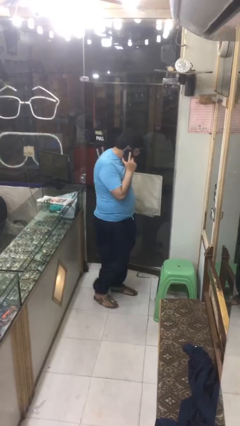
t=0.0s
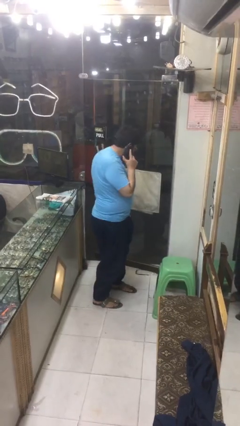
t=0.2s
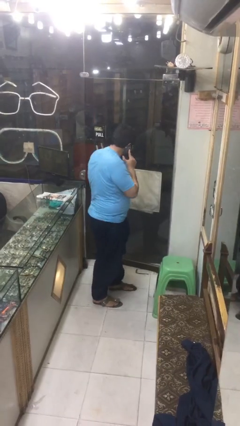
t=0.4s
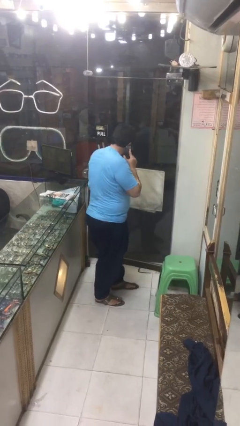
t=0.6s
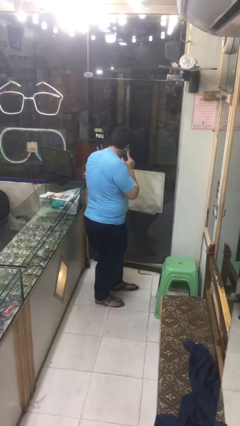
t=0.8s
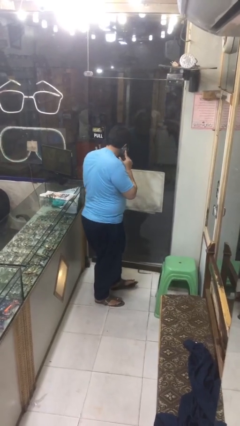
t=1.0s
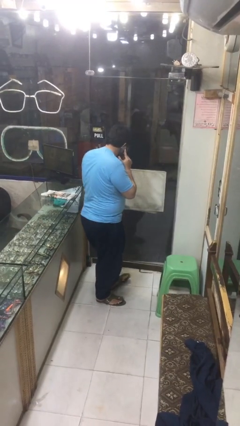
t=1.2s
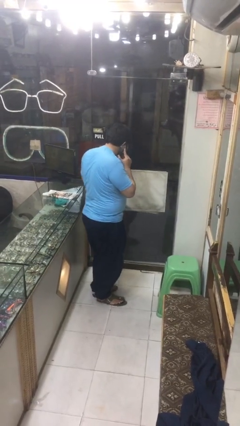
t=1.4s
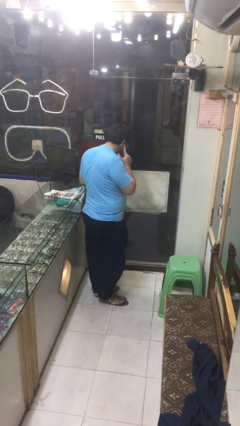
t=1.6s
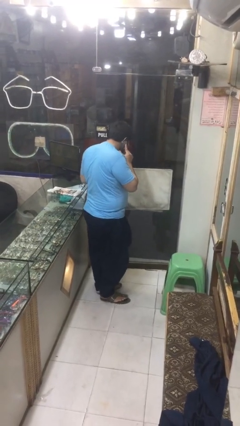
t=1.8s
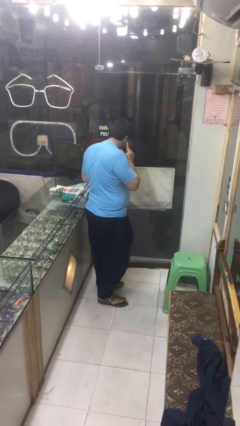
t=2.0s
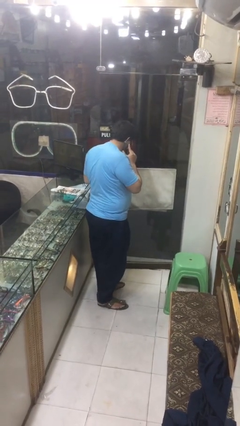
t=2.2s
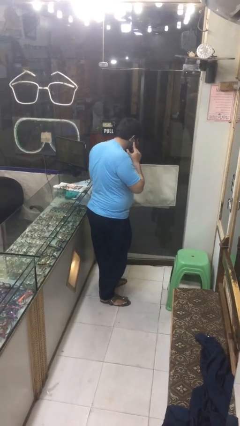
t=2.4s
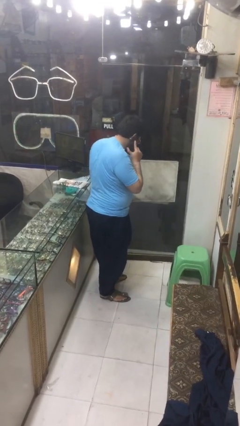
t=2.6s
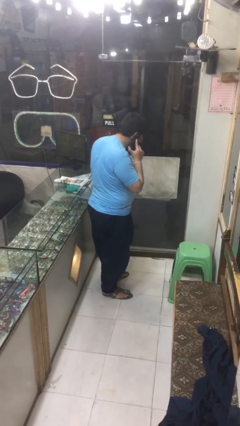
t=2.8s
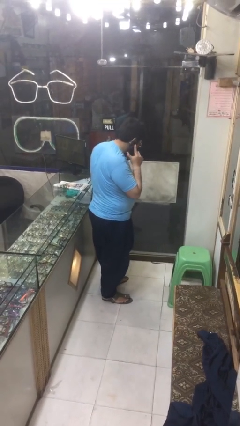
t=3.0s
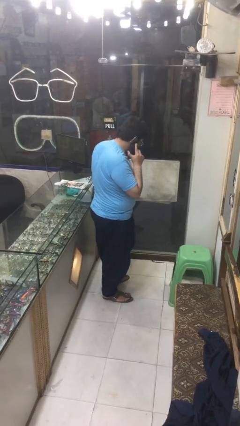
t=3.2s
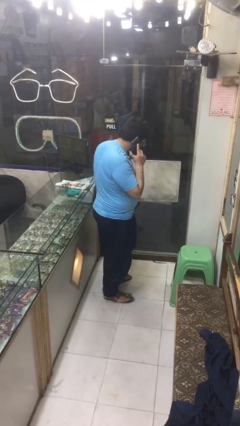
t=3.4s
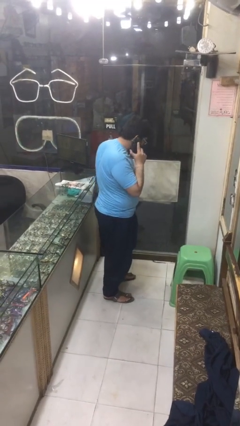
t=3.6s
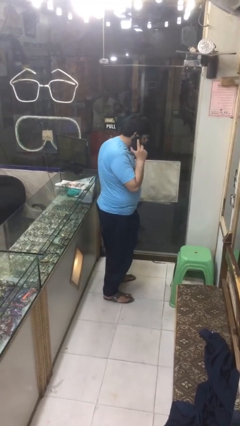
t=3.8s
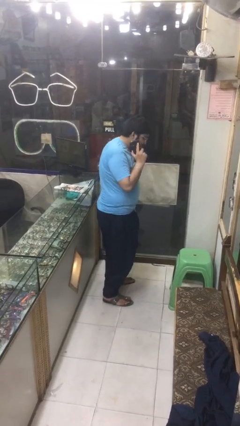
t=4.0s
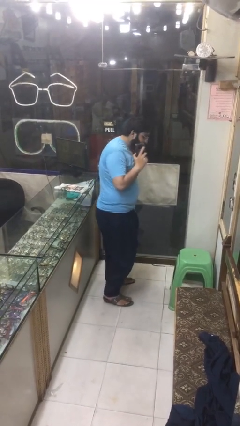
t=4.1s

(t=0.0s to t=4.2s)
person closes facility door

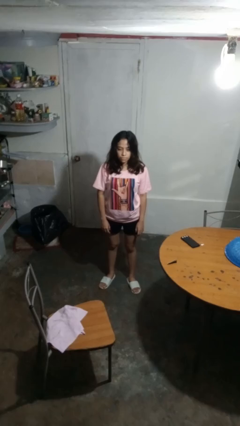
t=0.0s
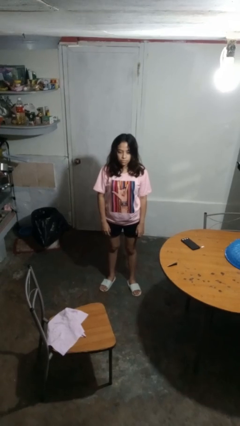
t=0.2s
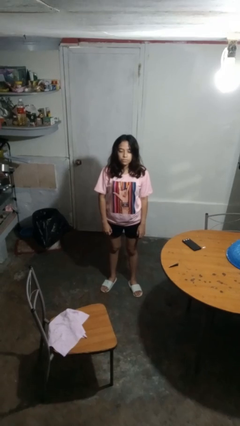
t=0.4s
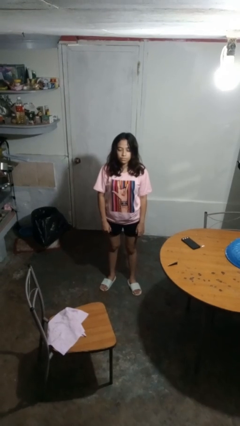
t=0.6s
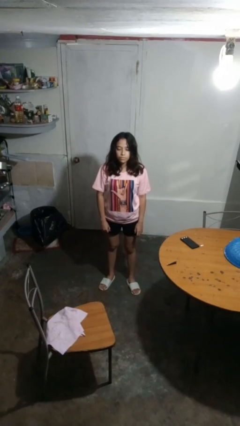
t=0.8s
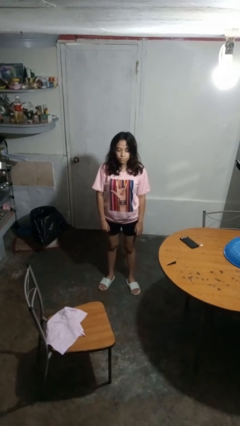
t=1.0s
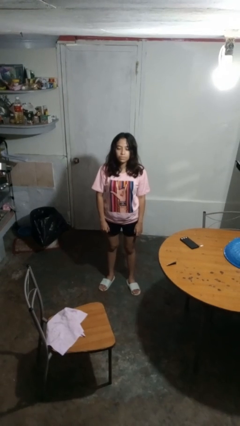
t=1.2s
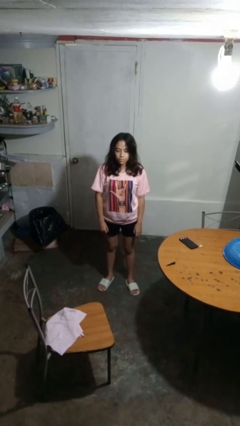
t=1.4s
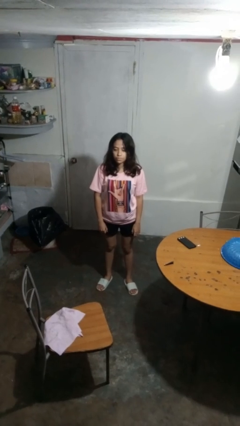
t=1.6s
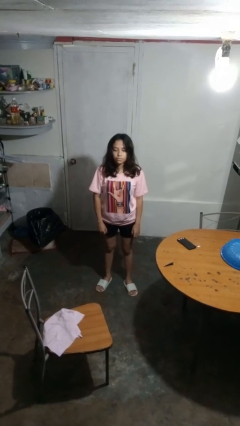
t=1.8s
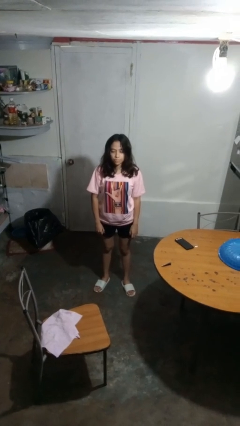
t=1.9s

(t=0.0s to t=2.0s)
person nods head

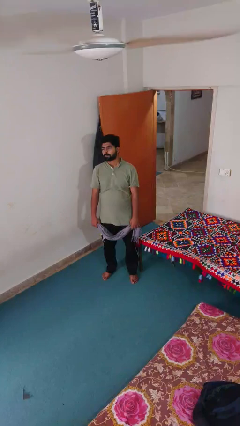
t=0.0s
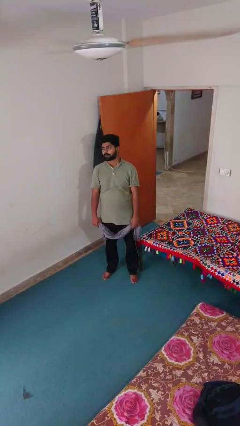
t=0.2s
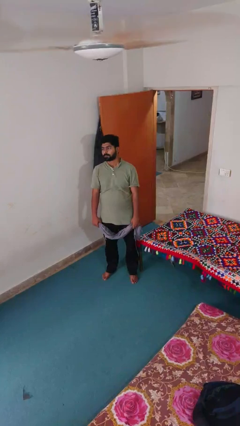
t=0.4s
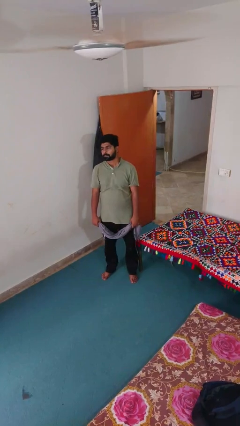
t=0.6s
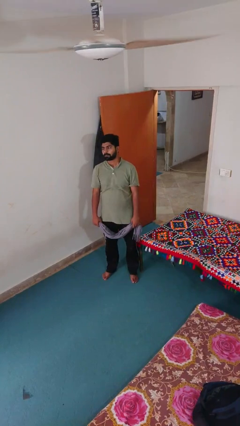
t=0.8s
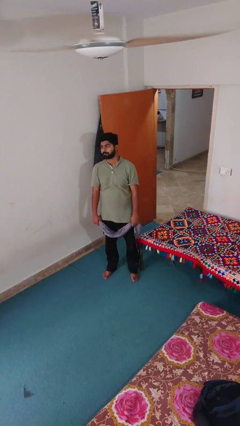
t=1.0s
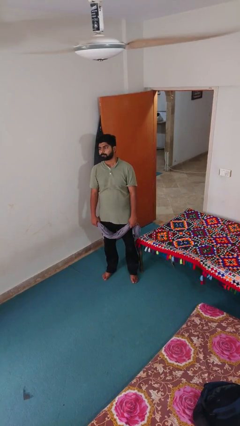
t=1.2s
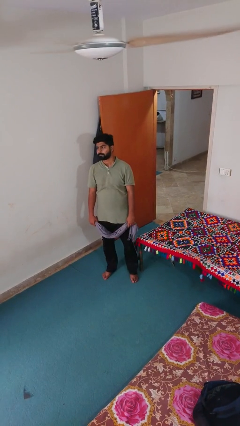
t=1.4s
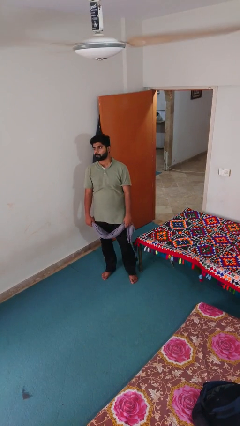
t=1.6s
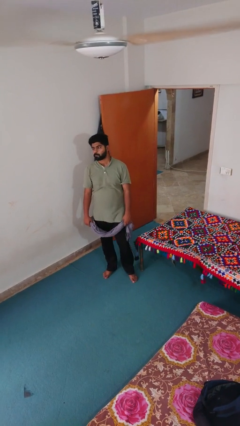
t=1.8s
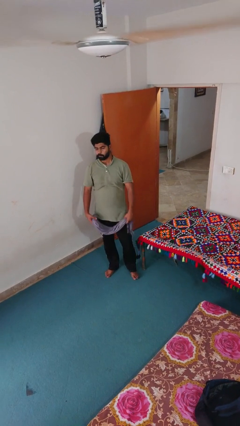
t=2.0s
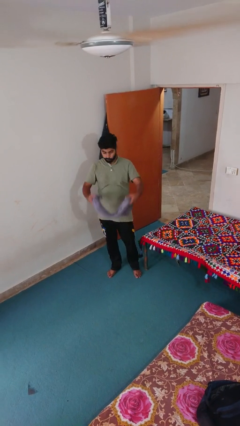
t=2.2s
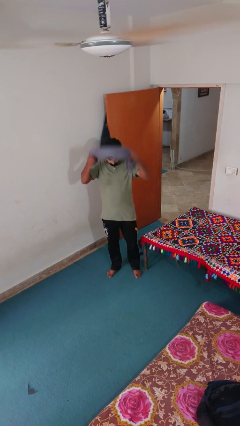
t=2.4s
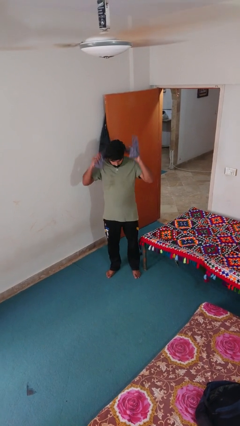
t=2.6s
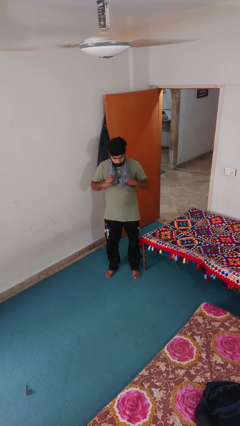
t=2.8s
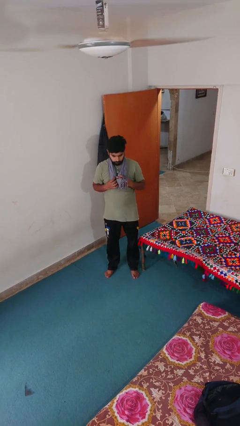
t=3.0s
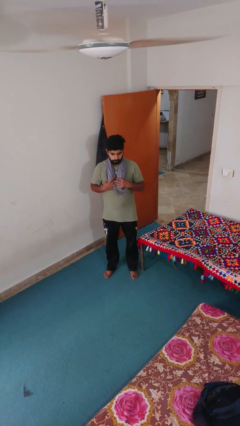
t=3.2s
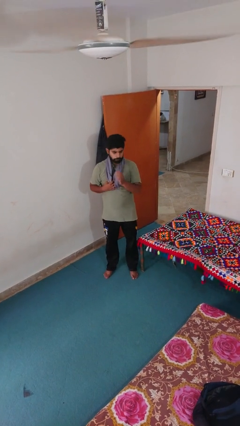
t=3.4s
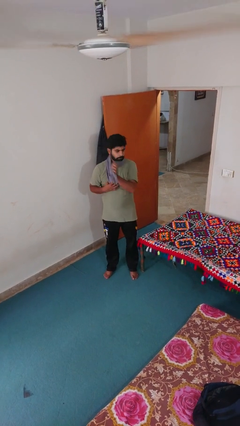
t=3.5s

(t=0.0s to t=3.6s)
person puts on scarf

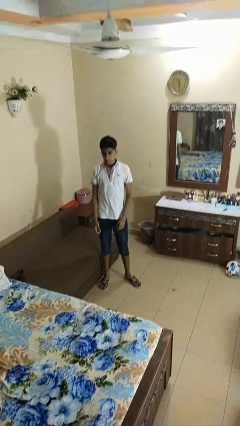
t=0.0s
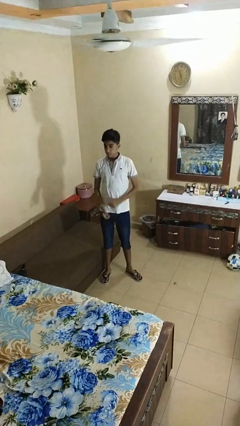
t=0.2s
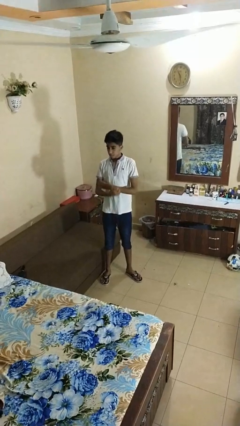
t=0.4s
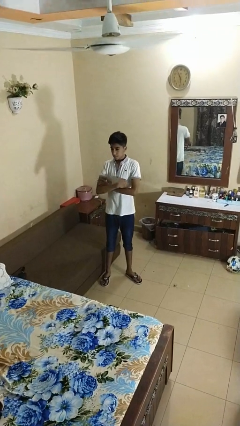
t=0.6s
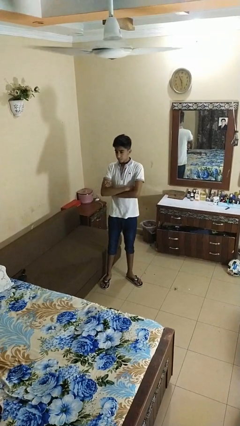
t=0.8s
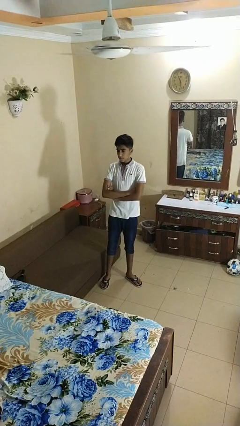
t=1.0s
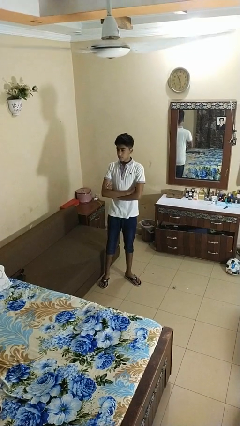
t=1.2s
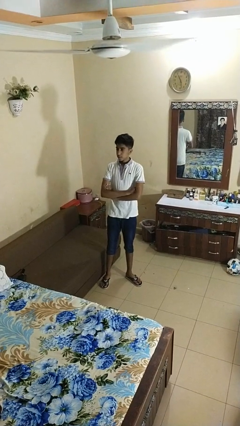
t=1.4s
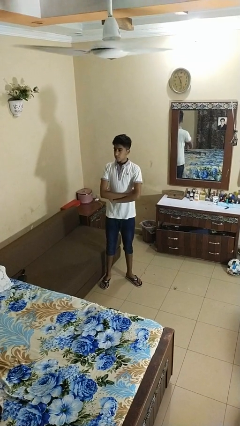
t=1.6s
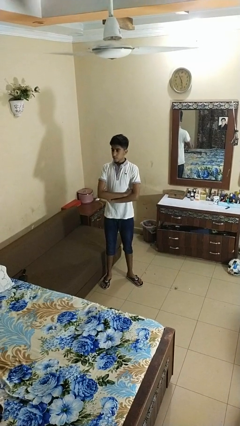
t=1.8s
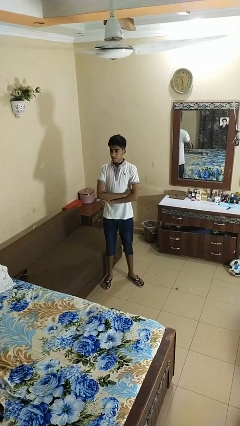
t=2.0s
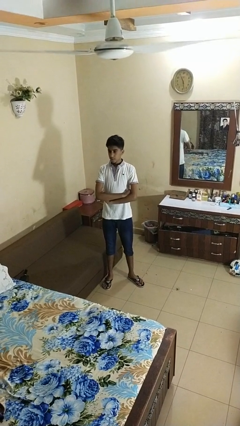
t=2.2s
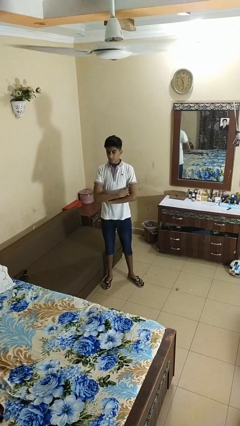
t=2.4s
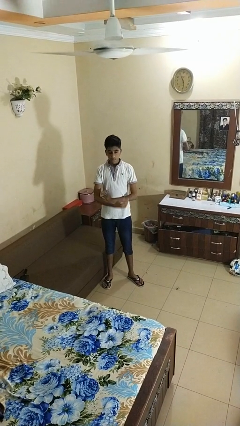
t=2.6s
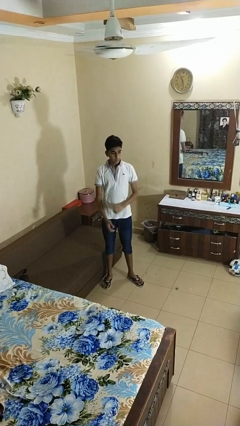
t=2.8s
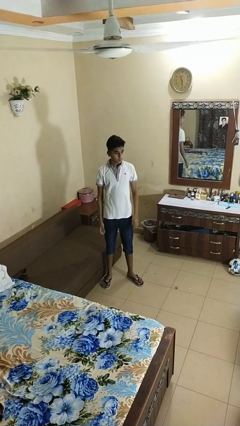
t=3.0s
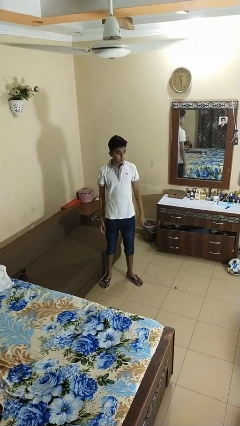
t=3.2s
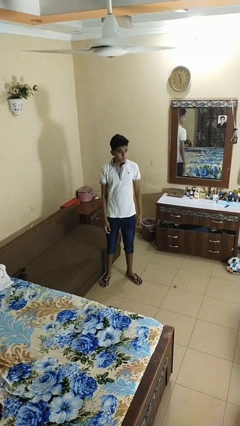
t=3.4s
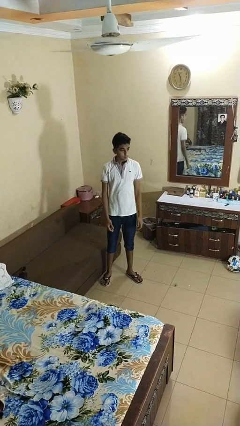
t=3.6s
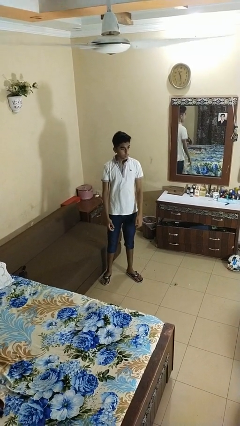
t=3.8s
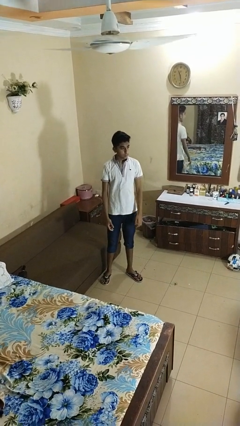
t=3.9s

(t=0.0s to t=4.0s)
person crosses arms

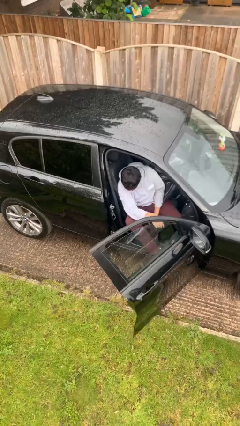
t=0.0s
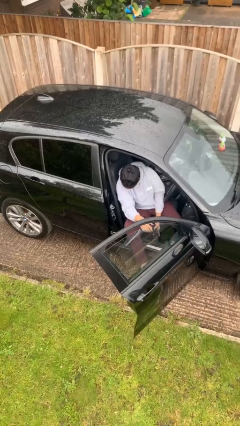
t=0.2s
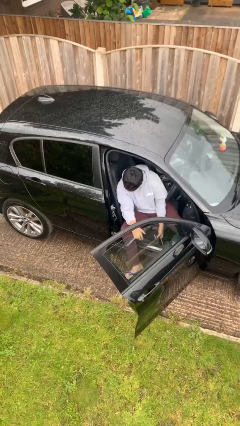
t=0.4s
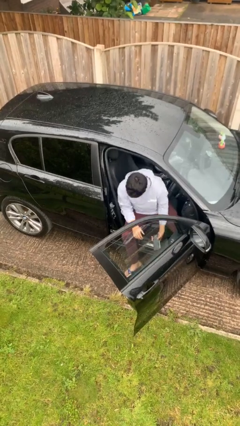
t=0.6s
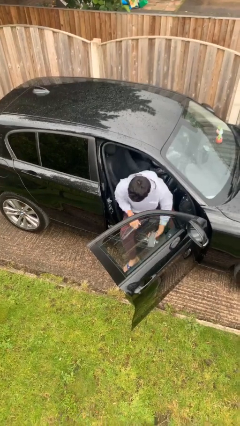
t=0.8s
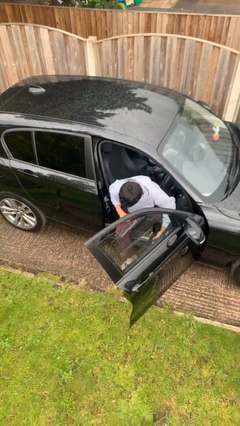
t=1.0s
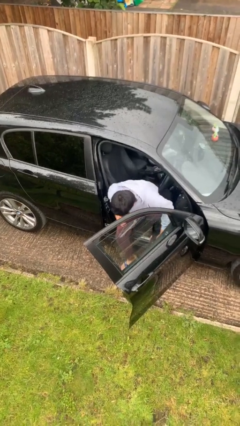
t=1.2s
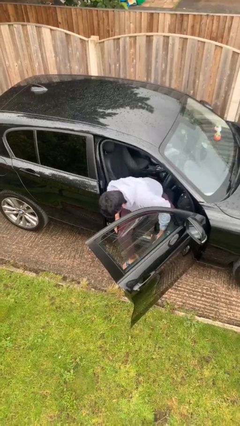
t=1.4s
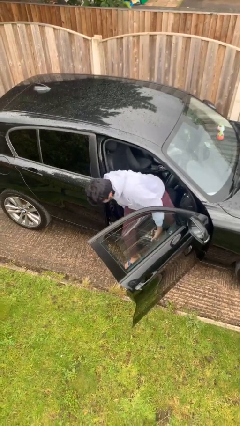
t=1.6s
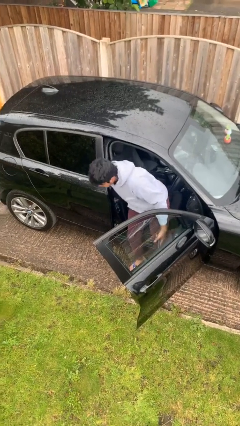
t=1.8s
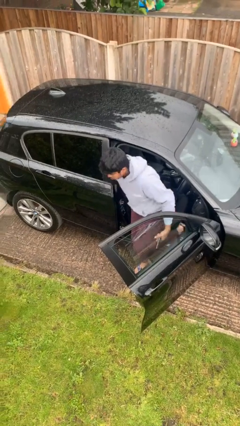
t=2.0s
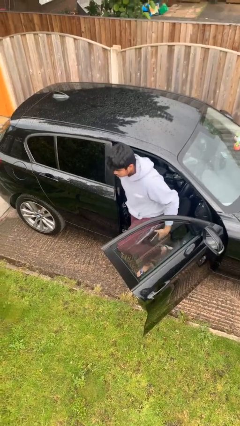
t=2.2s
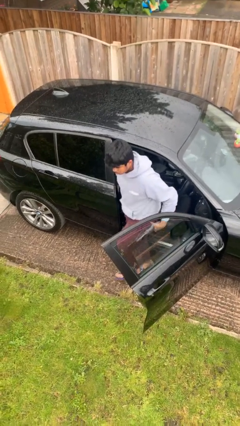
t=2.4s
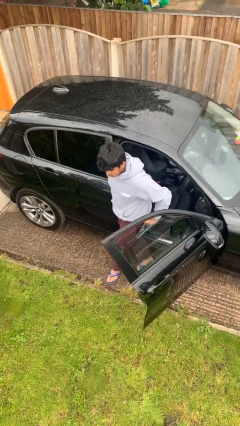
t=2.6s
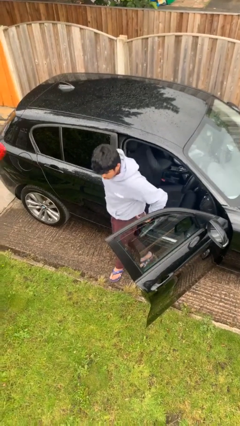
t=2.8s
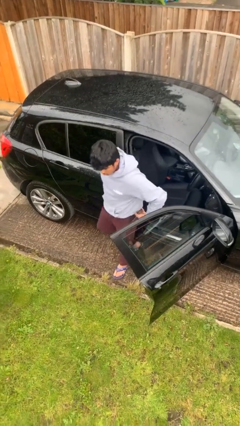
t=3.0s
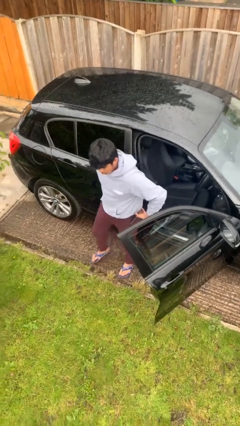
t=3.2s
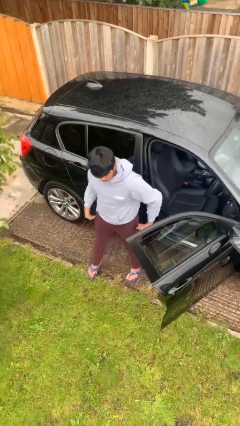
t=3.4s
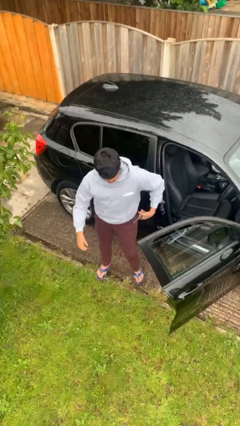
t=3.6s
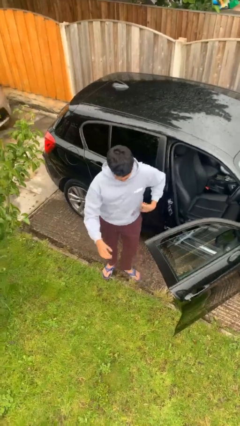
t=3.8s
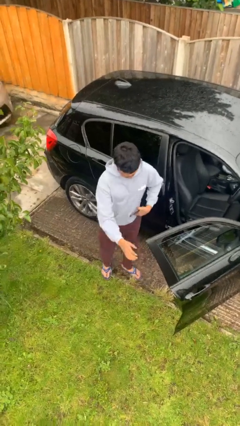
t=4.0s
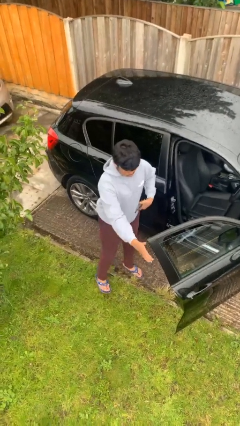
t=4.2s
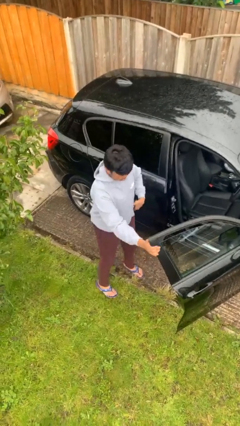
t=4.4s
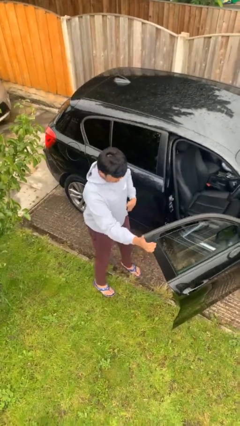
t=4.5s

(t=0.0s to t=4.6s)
person exits car
